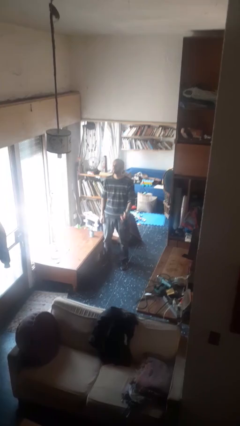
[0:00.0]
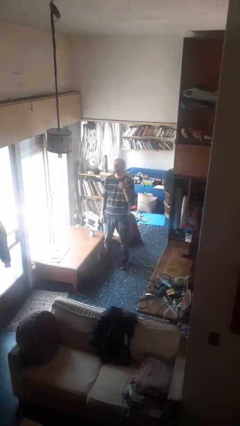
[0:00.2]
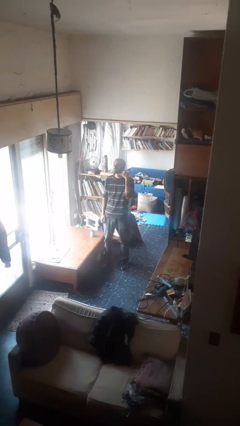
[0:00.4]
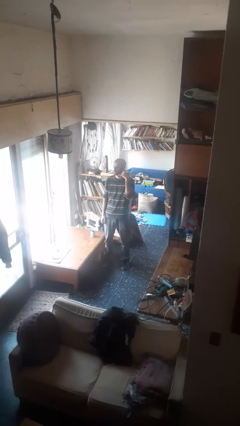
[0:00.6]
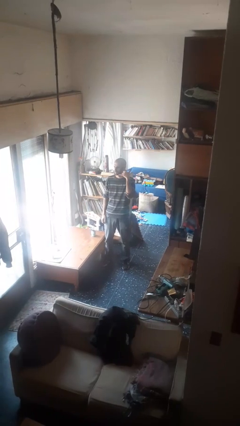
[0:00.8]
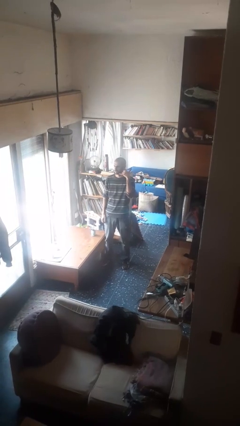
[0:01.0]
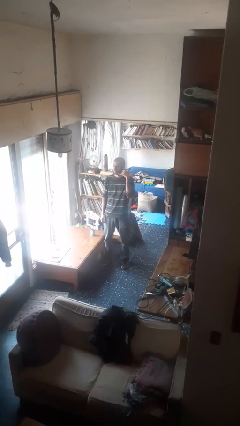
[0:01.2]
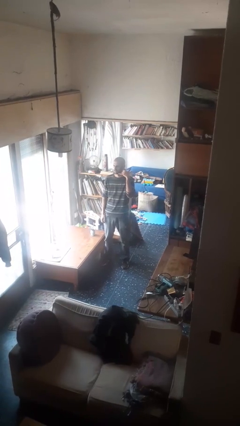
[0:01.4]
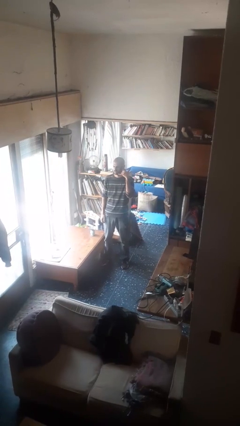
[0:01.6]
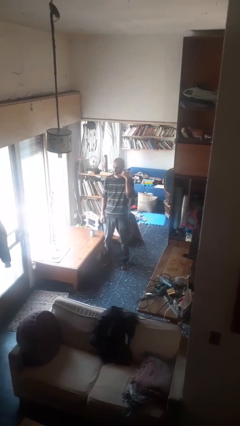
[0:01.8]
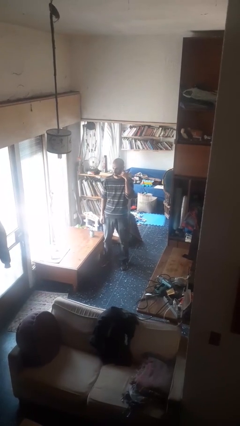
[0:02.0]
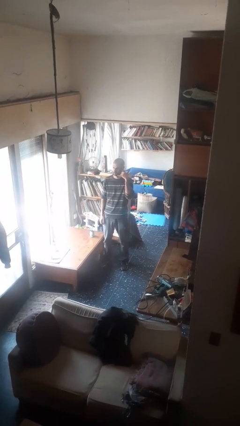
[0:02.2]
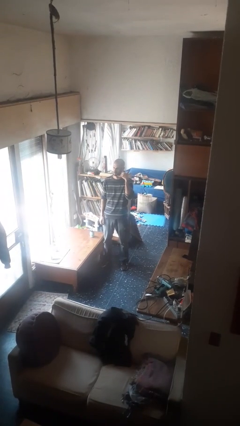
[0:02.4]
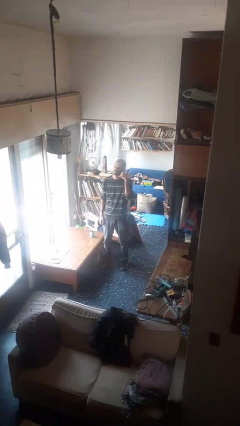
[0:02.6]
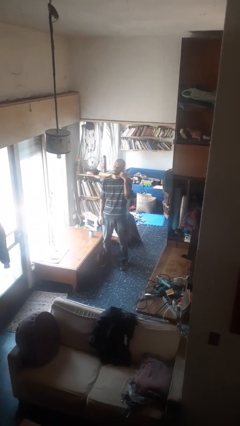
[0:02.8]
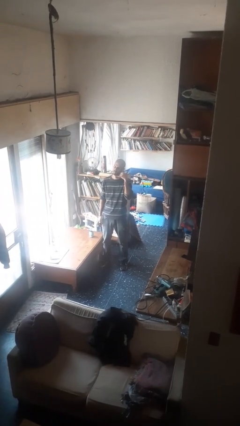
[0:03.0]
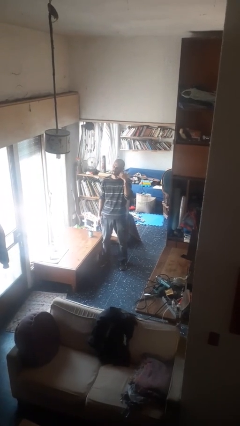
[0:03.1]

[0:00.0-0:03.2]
person gestures call me

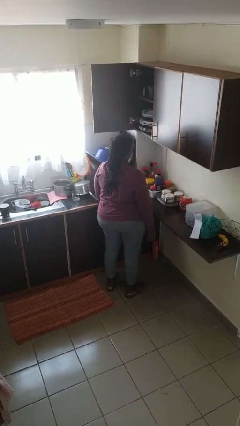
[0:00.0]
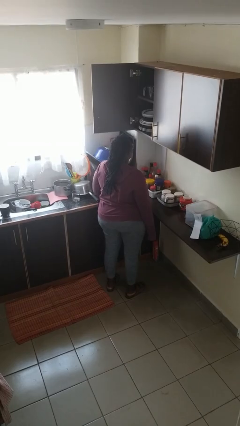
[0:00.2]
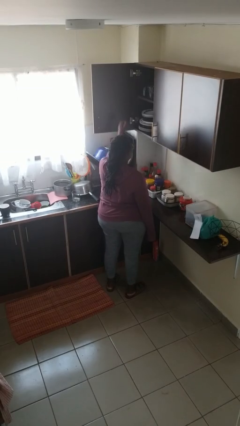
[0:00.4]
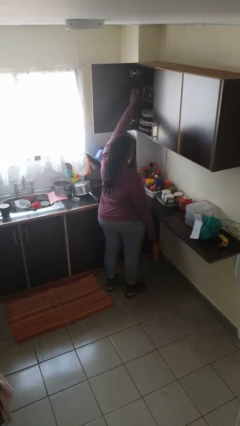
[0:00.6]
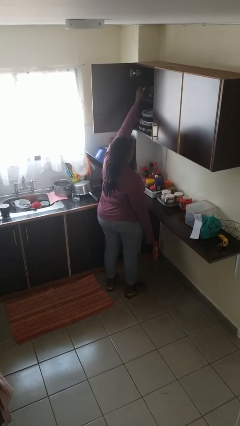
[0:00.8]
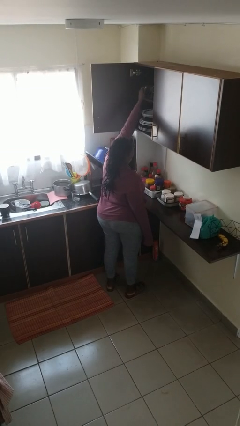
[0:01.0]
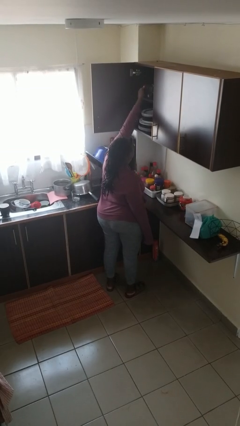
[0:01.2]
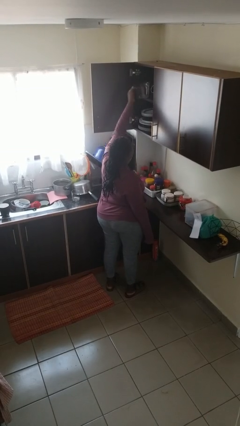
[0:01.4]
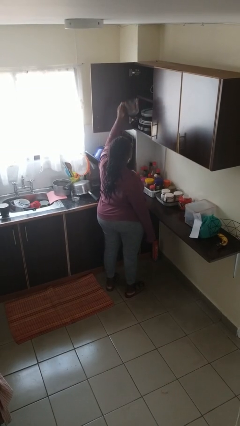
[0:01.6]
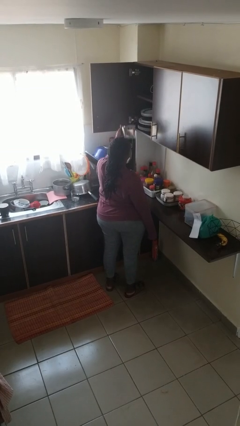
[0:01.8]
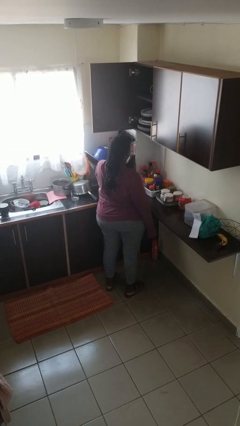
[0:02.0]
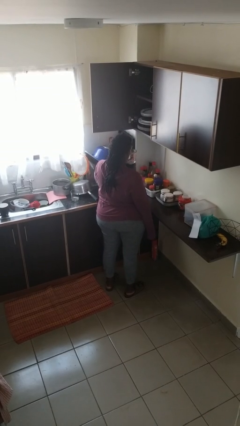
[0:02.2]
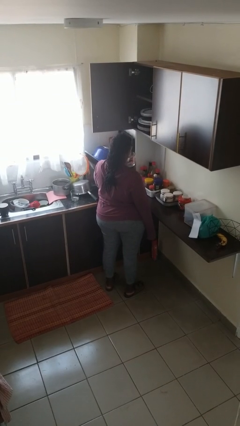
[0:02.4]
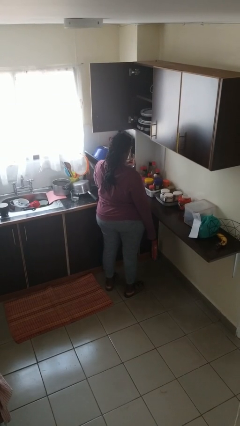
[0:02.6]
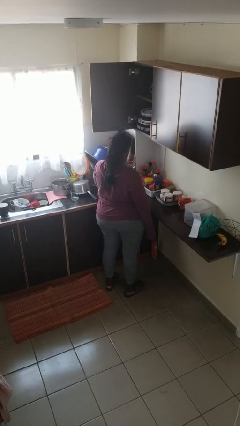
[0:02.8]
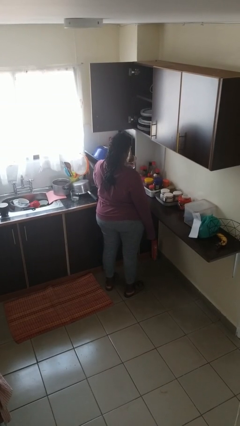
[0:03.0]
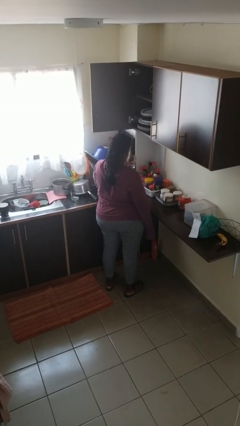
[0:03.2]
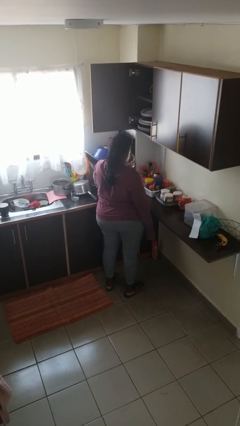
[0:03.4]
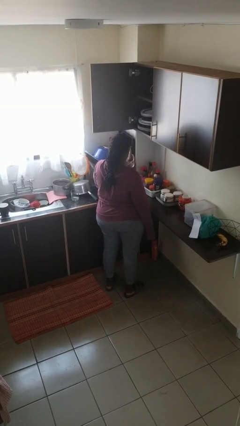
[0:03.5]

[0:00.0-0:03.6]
person picks up object from cabinet

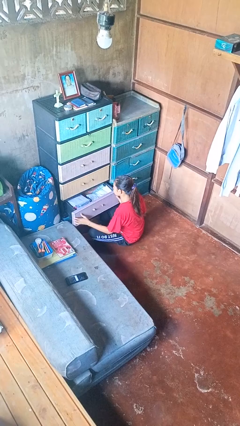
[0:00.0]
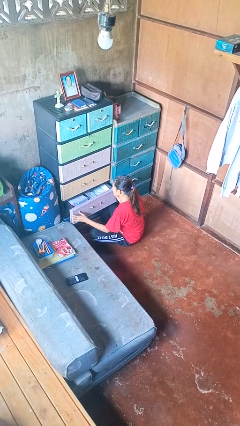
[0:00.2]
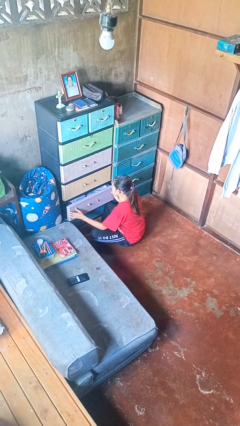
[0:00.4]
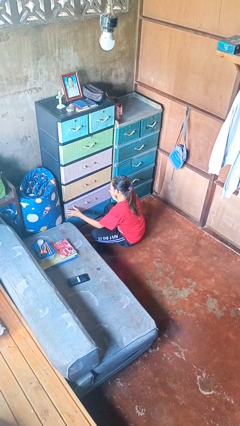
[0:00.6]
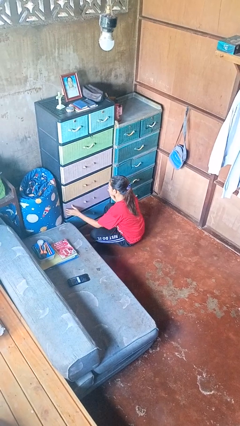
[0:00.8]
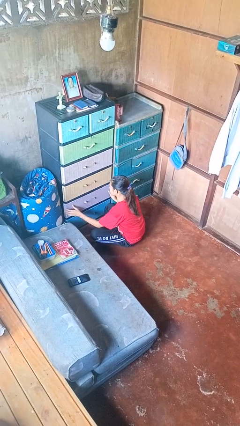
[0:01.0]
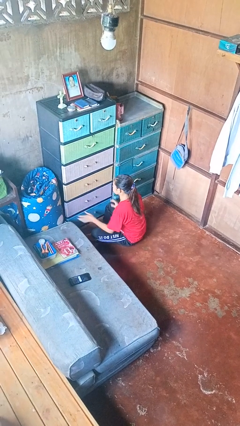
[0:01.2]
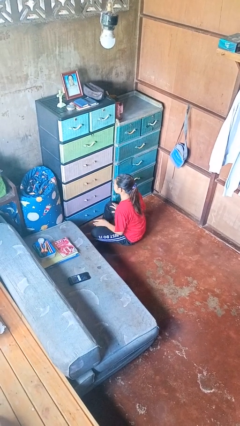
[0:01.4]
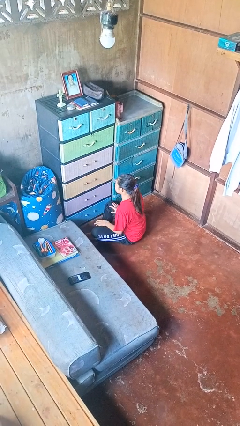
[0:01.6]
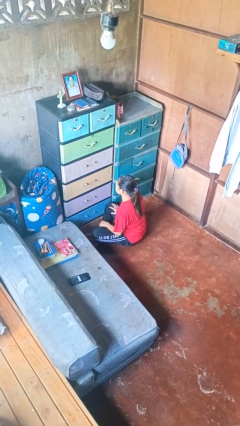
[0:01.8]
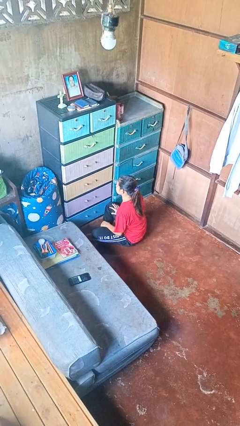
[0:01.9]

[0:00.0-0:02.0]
person closes dresser drawer

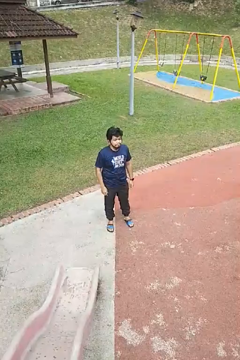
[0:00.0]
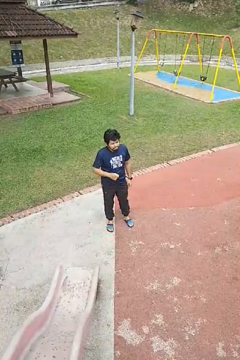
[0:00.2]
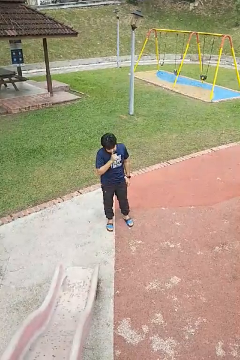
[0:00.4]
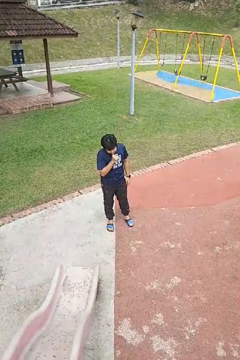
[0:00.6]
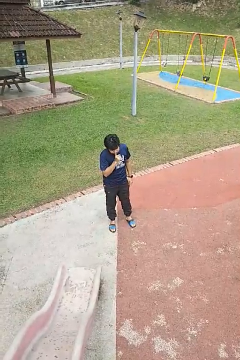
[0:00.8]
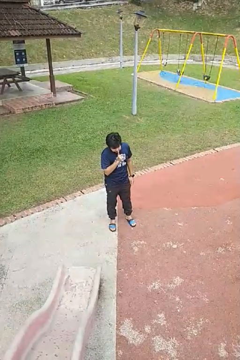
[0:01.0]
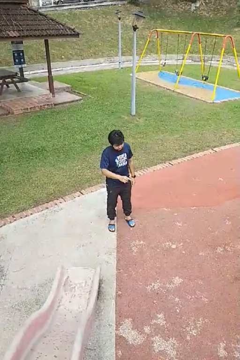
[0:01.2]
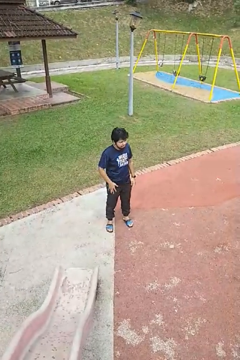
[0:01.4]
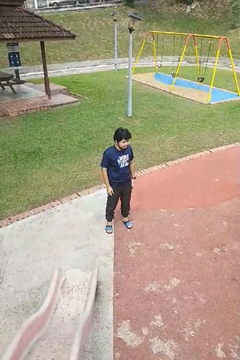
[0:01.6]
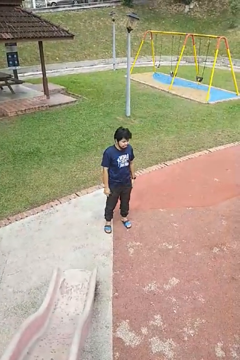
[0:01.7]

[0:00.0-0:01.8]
person gestures be quiet

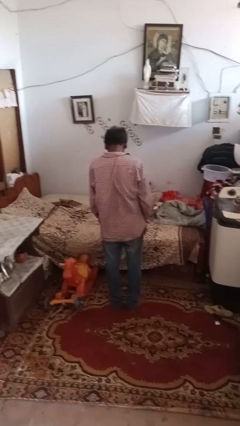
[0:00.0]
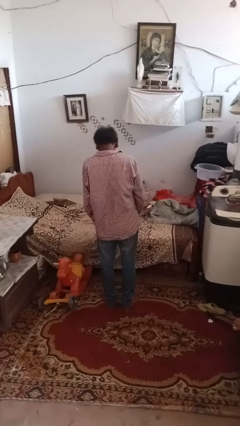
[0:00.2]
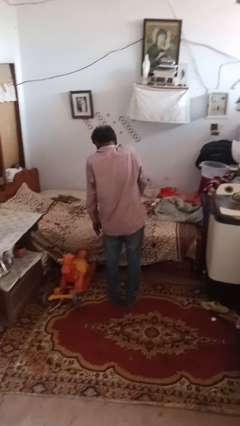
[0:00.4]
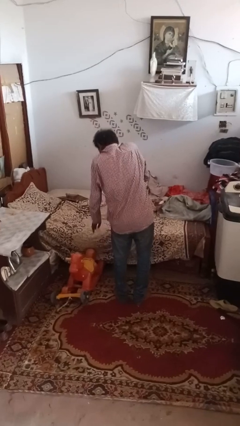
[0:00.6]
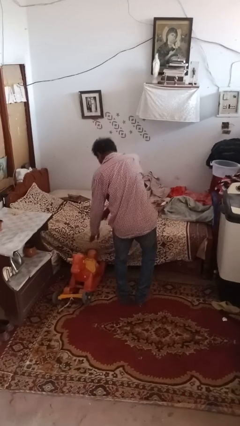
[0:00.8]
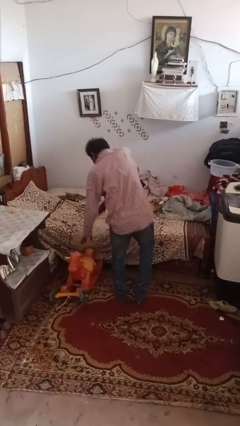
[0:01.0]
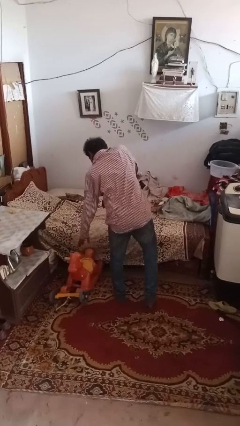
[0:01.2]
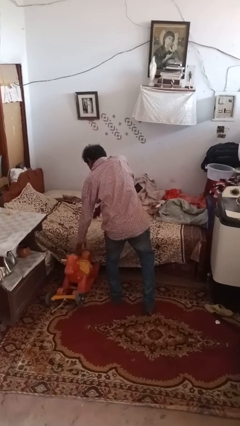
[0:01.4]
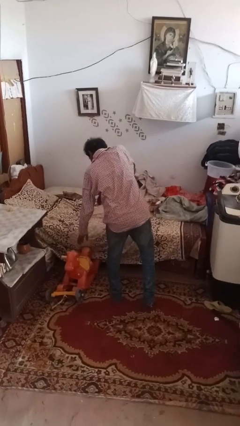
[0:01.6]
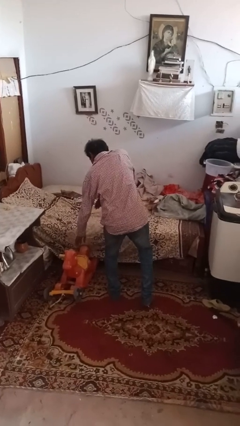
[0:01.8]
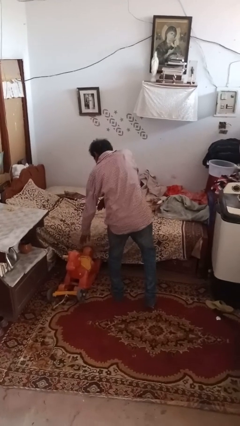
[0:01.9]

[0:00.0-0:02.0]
person dances in place

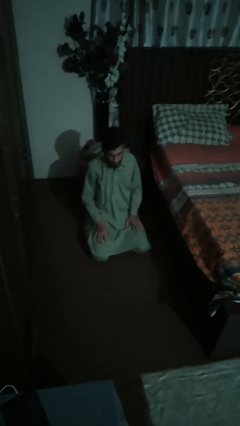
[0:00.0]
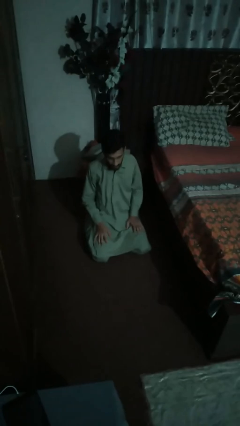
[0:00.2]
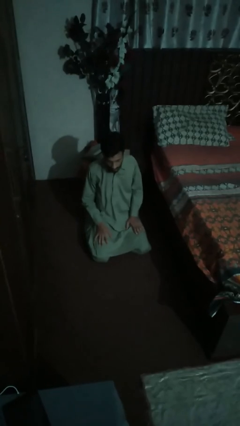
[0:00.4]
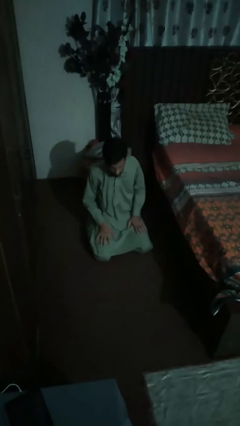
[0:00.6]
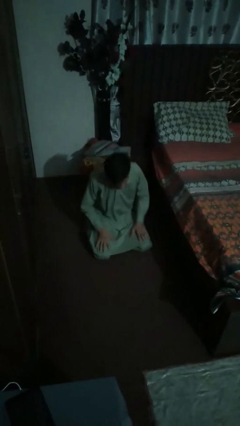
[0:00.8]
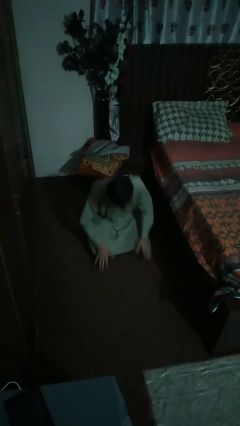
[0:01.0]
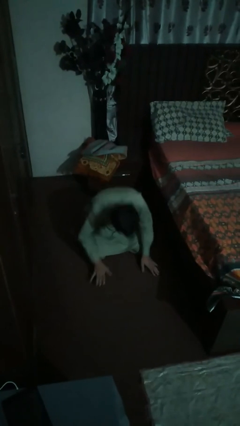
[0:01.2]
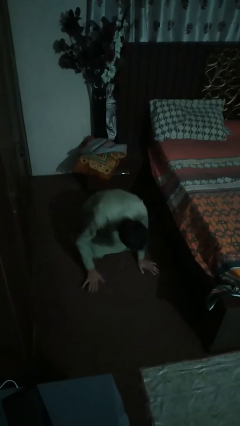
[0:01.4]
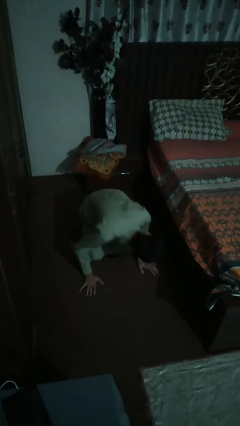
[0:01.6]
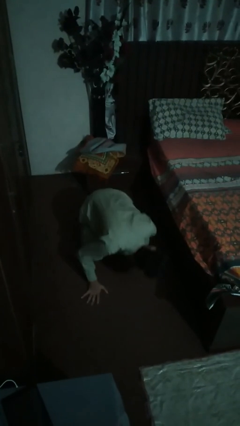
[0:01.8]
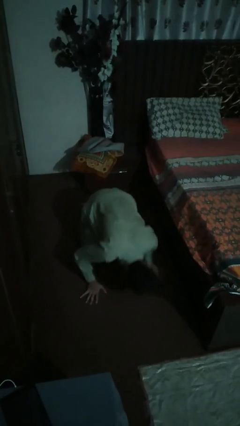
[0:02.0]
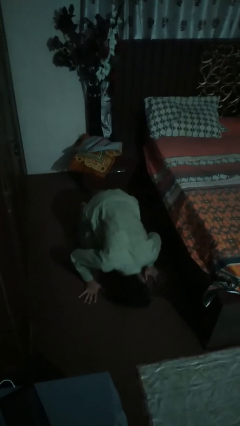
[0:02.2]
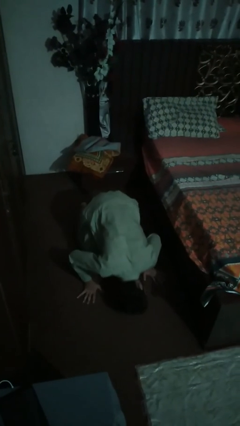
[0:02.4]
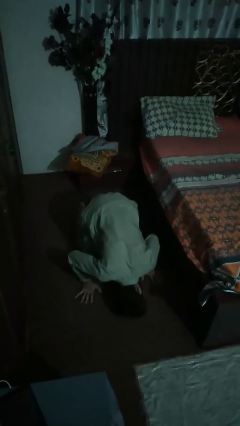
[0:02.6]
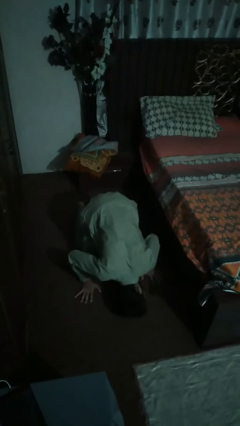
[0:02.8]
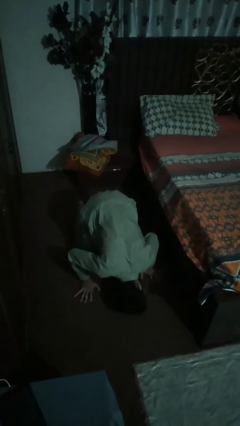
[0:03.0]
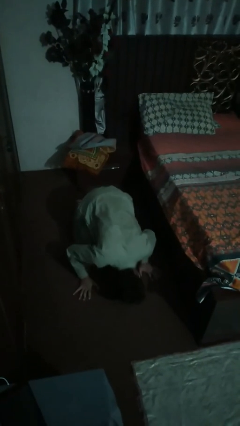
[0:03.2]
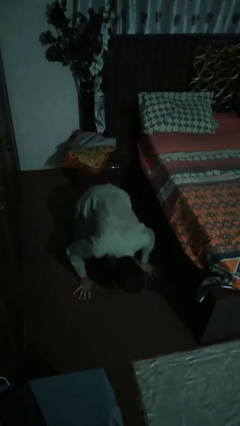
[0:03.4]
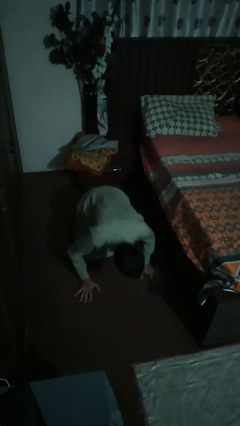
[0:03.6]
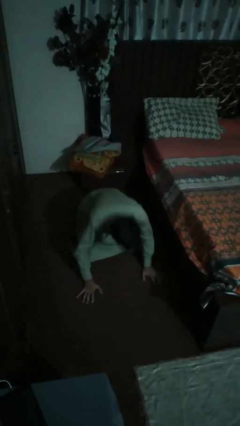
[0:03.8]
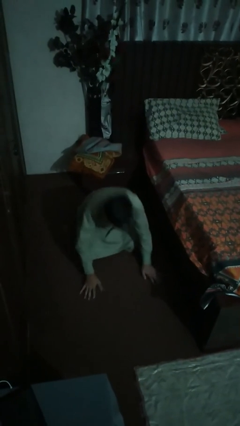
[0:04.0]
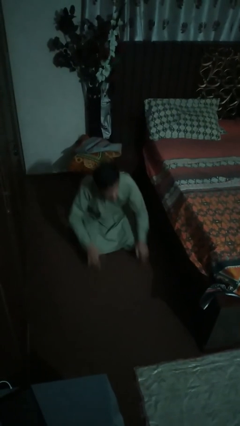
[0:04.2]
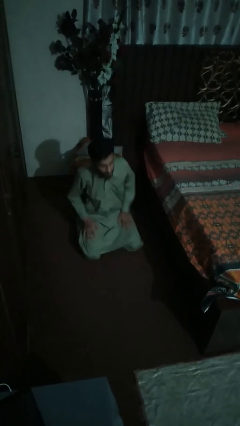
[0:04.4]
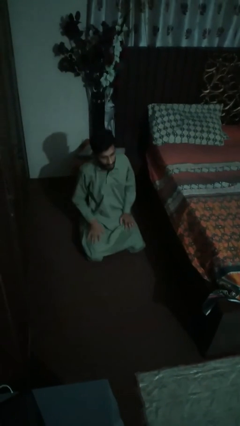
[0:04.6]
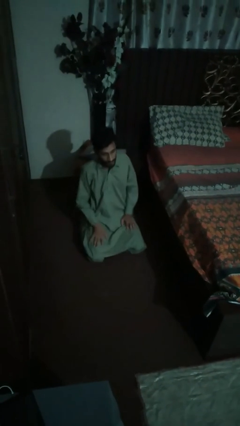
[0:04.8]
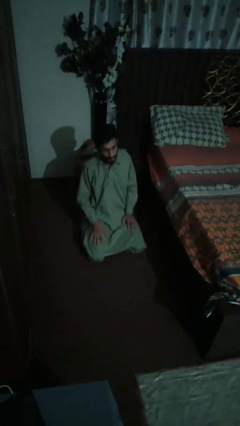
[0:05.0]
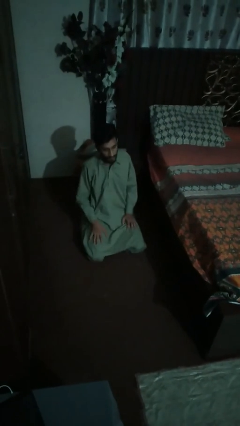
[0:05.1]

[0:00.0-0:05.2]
person searches under bed
